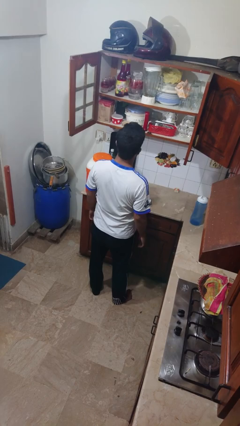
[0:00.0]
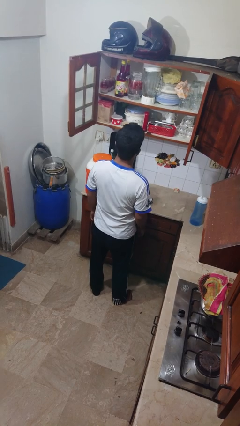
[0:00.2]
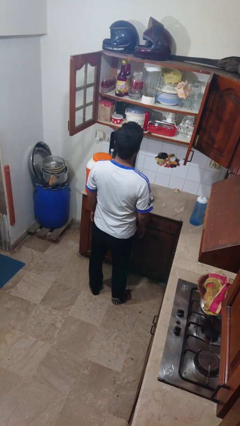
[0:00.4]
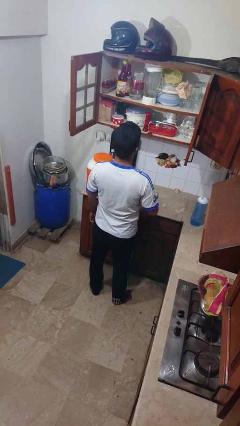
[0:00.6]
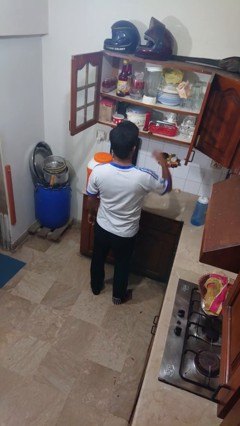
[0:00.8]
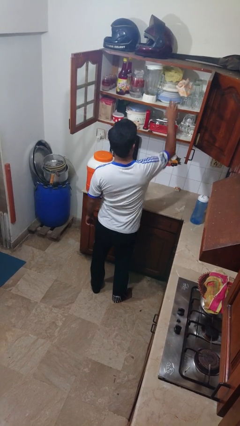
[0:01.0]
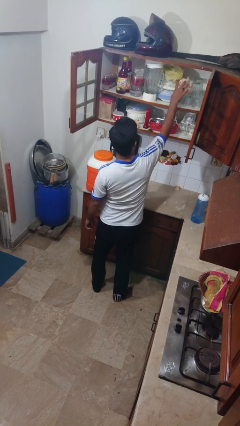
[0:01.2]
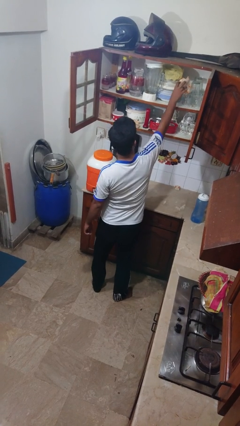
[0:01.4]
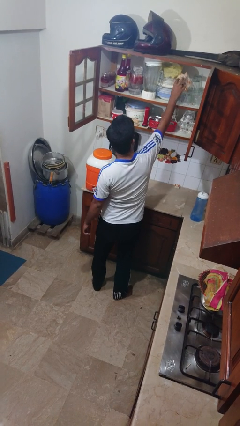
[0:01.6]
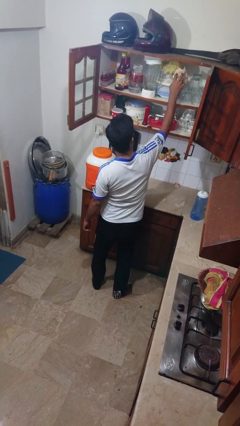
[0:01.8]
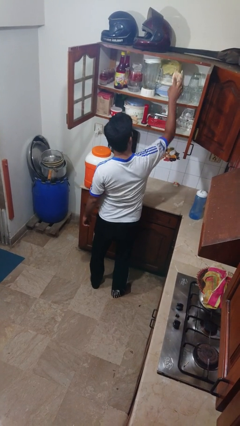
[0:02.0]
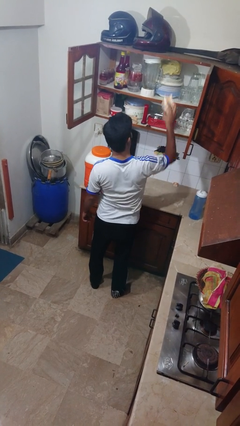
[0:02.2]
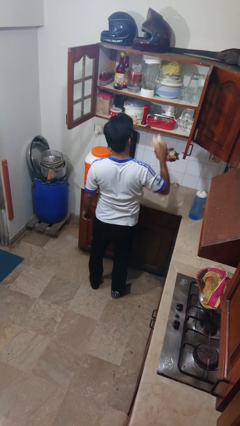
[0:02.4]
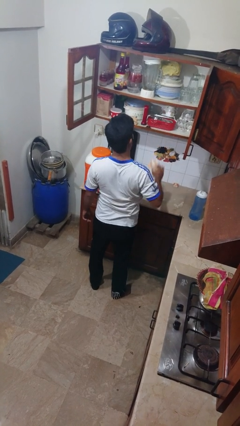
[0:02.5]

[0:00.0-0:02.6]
person picks up object from cabinet

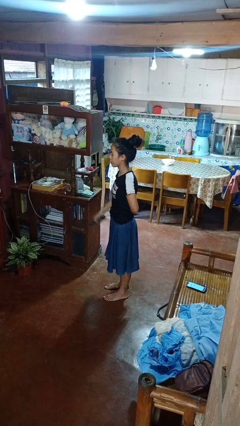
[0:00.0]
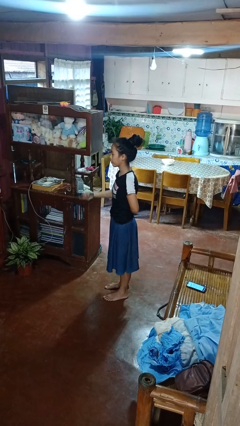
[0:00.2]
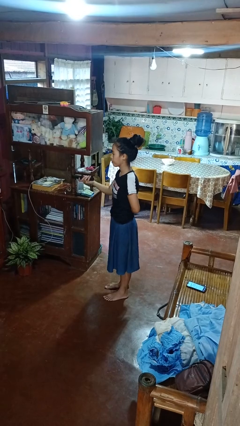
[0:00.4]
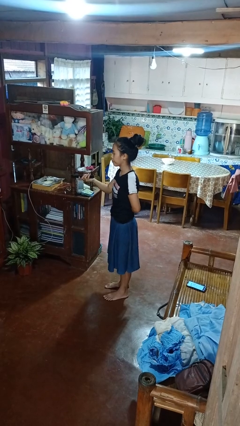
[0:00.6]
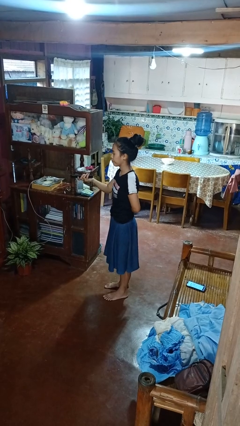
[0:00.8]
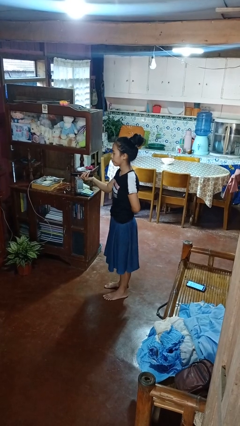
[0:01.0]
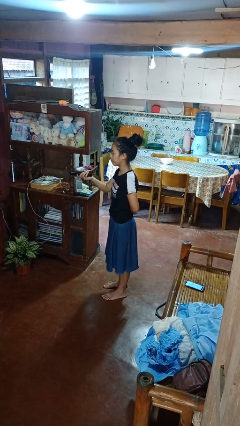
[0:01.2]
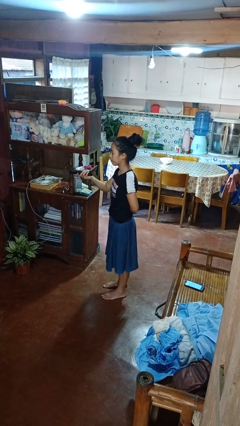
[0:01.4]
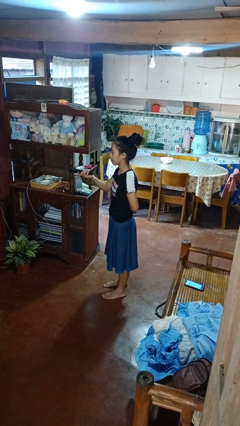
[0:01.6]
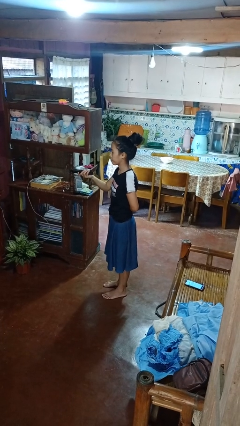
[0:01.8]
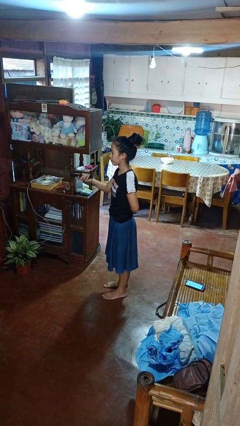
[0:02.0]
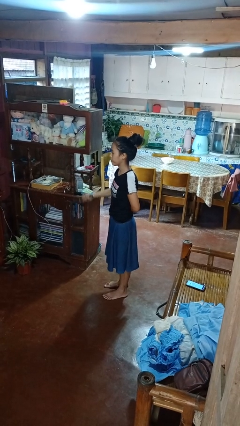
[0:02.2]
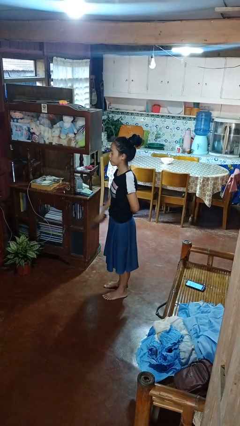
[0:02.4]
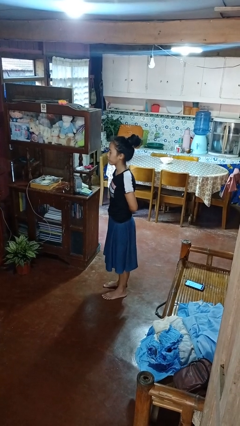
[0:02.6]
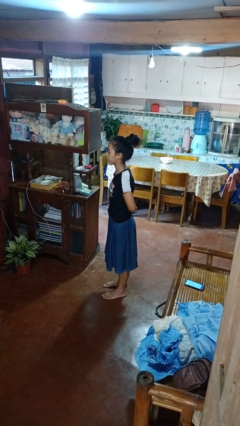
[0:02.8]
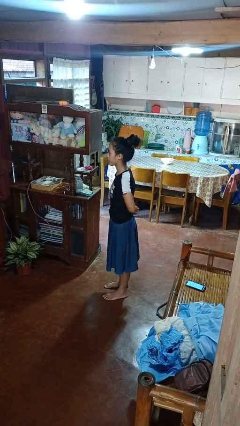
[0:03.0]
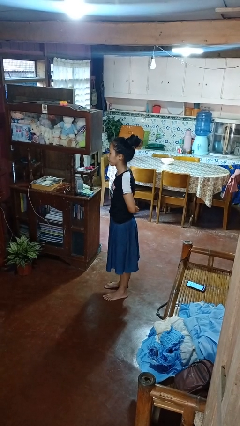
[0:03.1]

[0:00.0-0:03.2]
person uses television remote

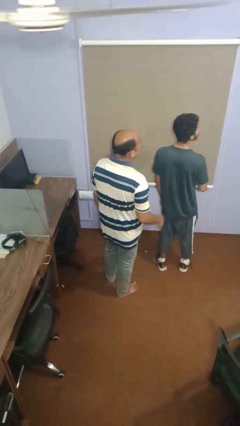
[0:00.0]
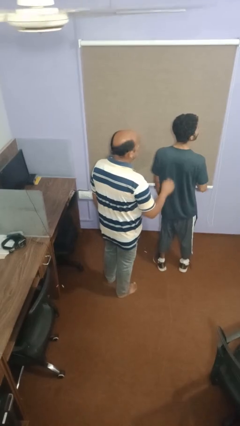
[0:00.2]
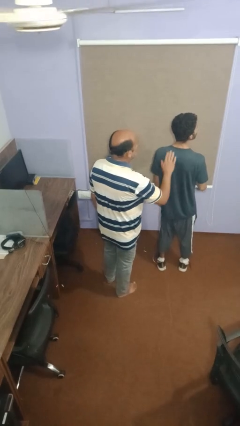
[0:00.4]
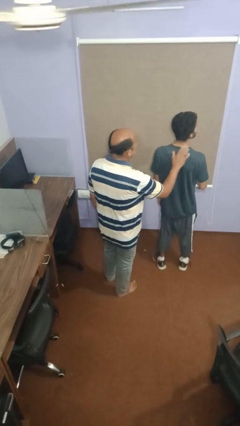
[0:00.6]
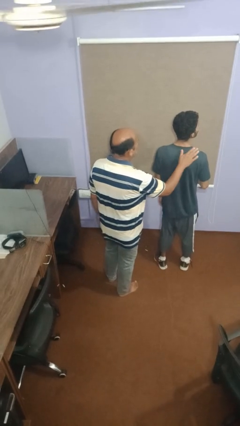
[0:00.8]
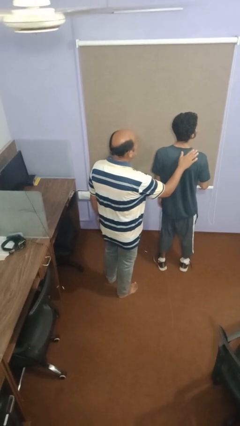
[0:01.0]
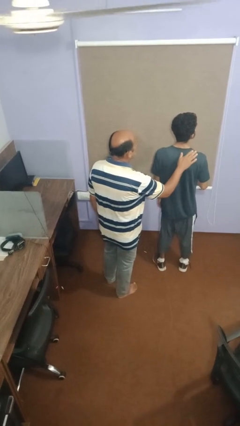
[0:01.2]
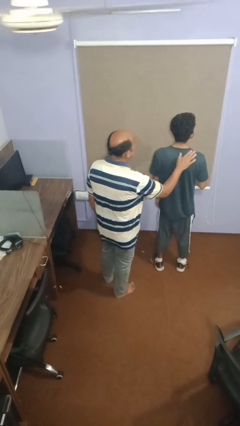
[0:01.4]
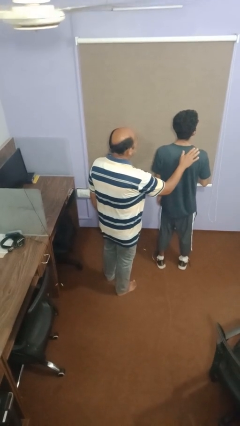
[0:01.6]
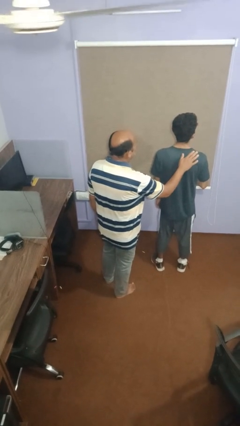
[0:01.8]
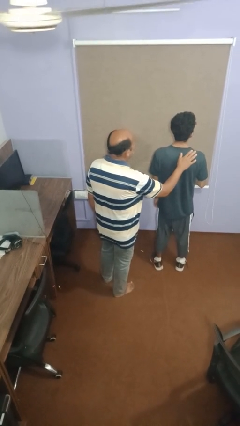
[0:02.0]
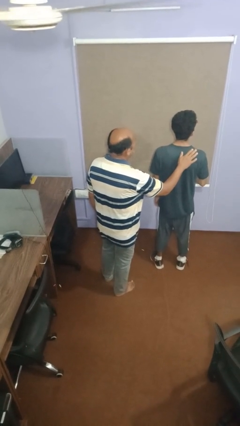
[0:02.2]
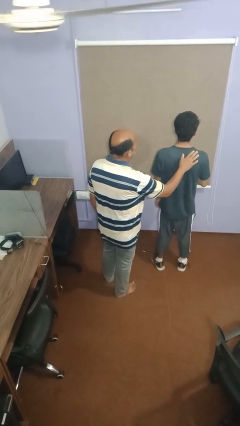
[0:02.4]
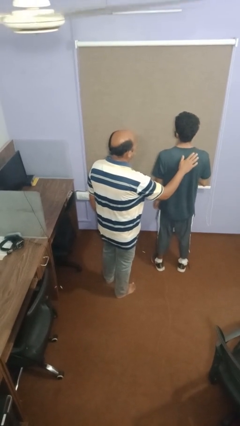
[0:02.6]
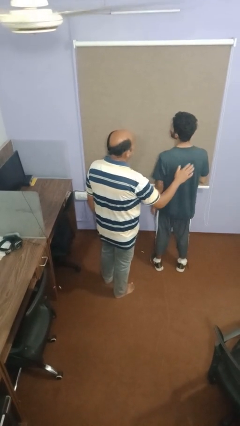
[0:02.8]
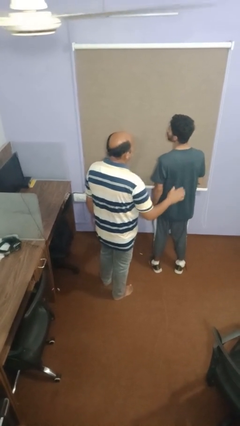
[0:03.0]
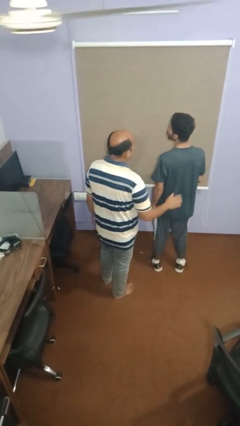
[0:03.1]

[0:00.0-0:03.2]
person touches back of person

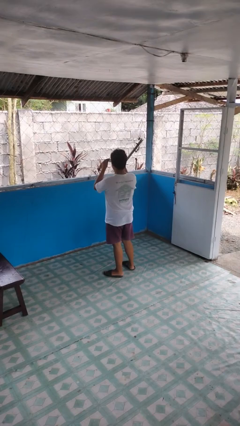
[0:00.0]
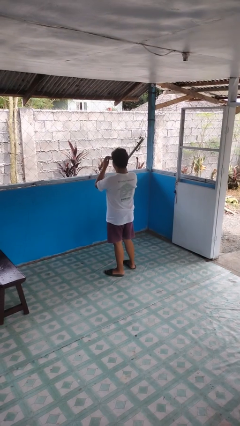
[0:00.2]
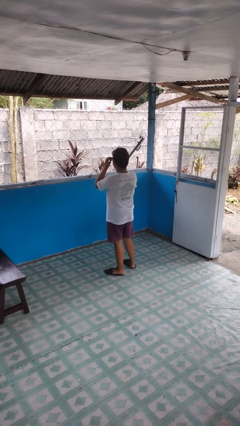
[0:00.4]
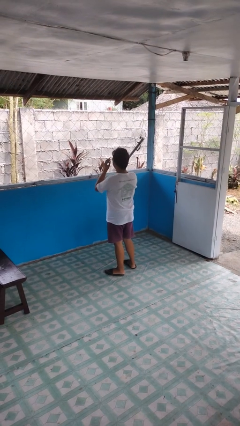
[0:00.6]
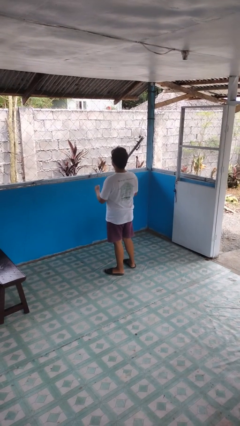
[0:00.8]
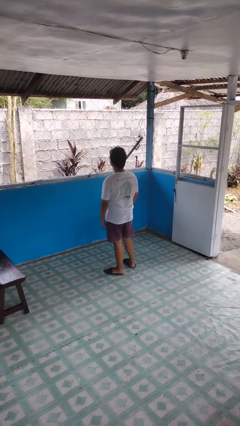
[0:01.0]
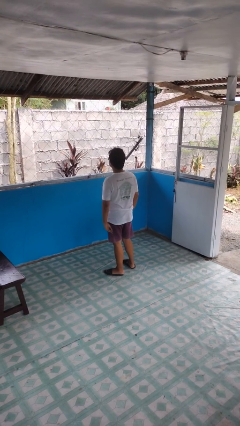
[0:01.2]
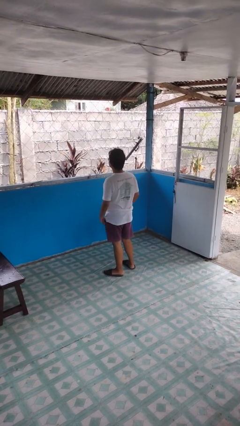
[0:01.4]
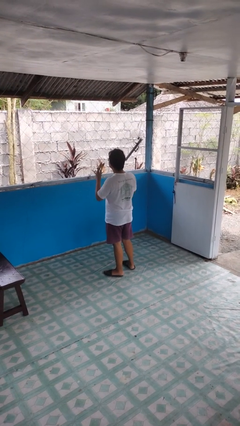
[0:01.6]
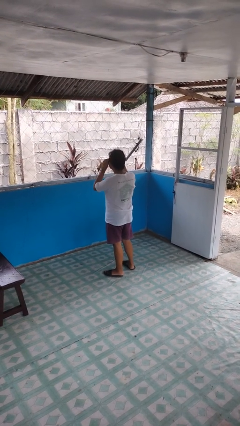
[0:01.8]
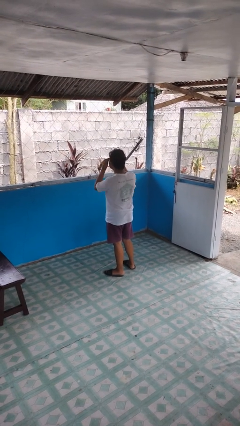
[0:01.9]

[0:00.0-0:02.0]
person puts on sunglasses

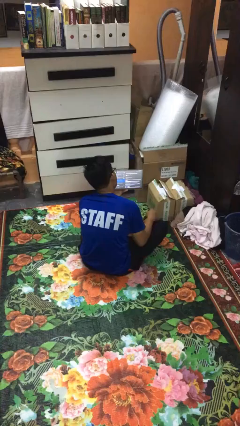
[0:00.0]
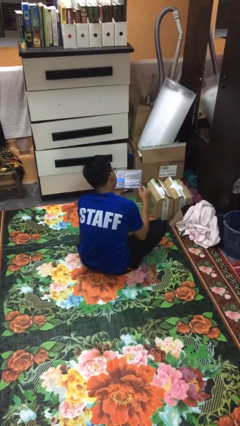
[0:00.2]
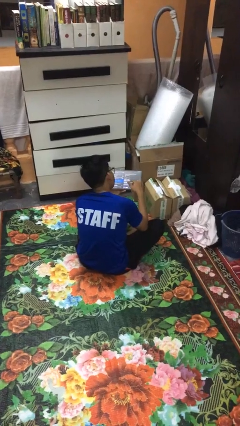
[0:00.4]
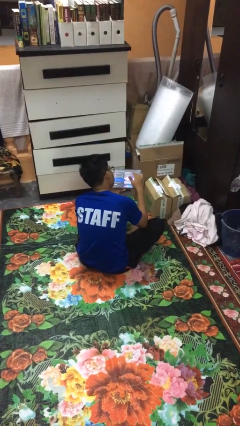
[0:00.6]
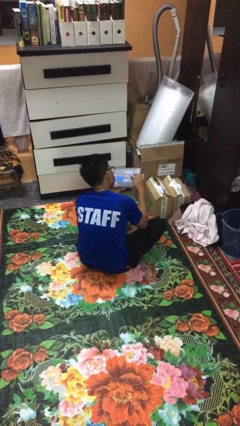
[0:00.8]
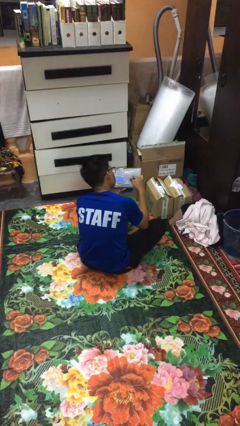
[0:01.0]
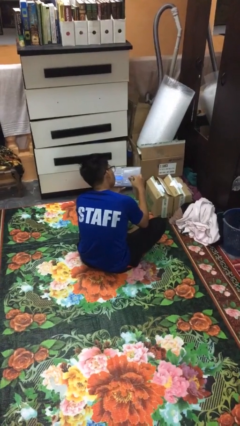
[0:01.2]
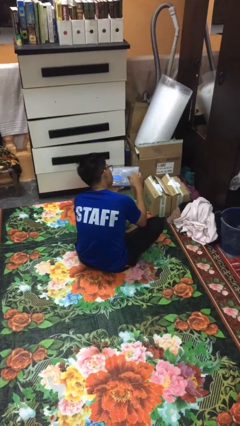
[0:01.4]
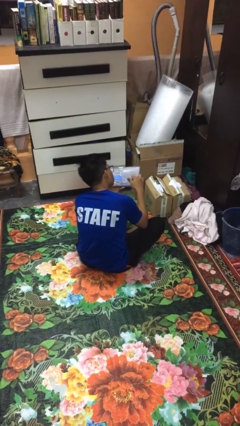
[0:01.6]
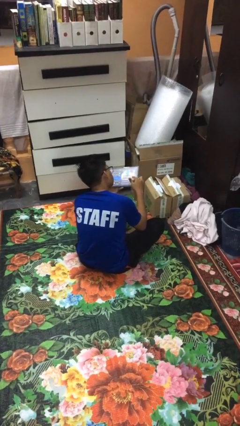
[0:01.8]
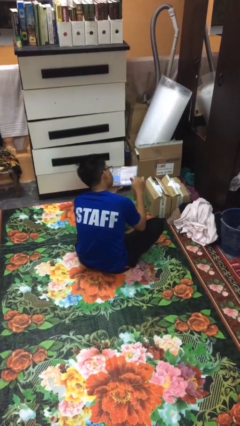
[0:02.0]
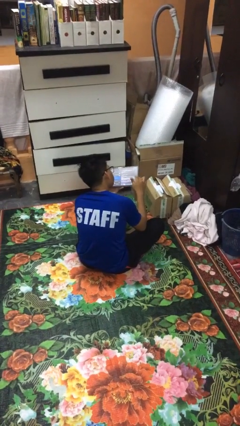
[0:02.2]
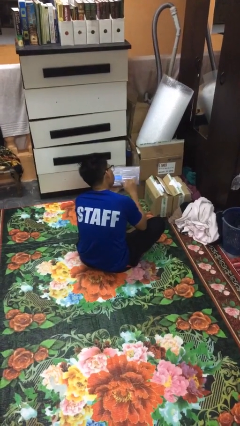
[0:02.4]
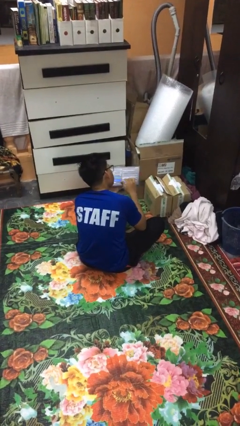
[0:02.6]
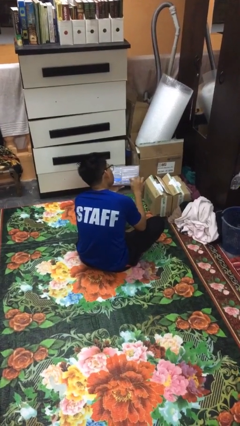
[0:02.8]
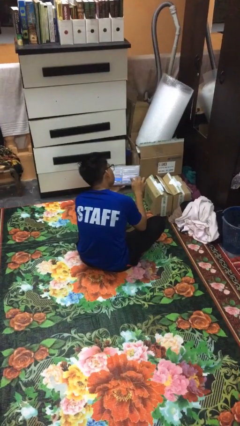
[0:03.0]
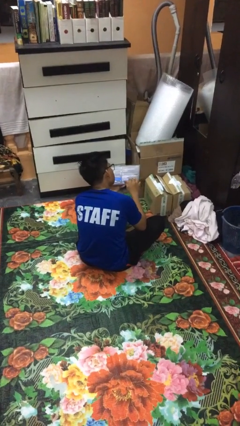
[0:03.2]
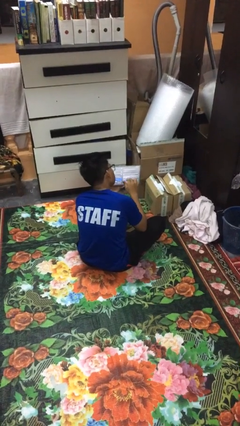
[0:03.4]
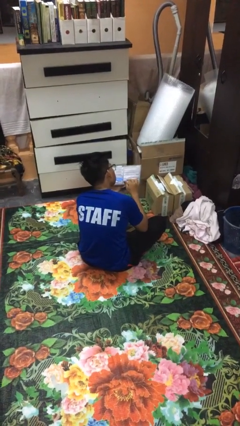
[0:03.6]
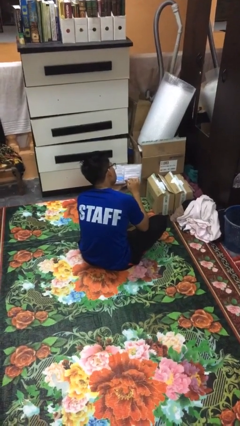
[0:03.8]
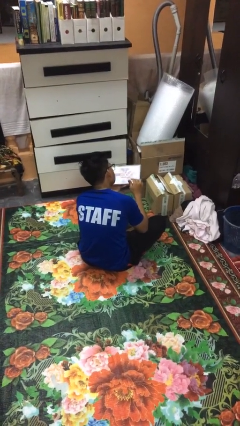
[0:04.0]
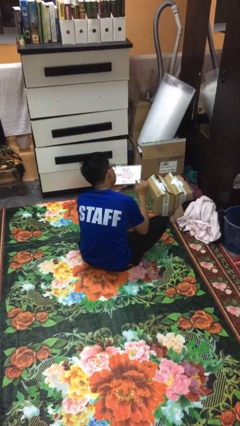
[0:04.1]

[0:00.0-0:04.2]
person interacts with tablet

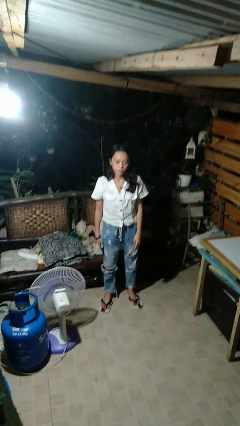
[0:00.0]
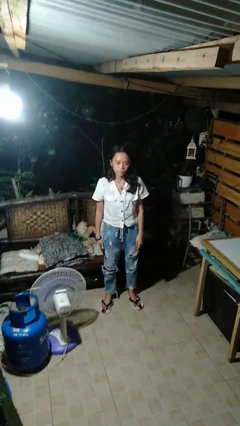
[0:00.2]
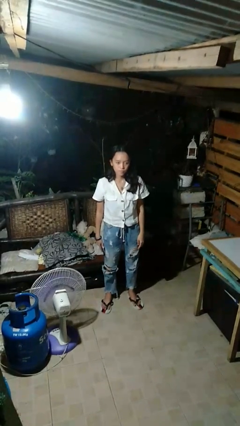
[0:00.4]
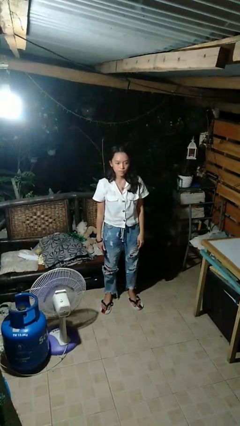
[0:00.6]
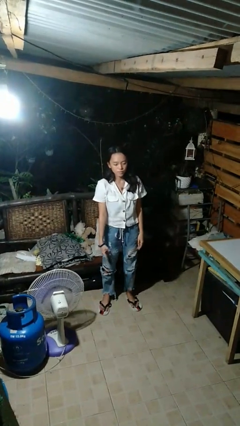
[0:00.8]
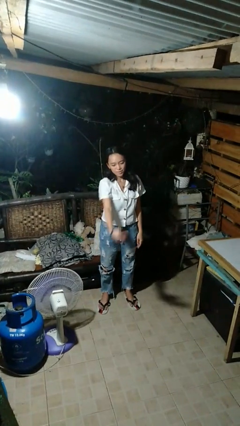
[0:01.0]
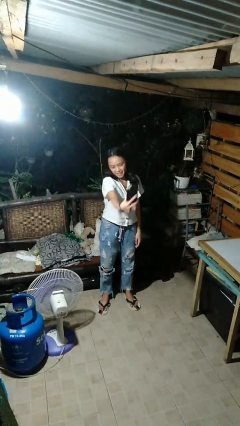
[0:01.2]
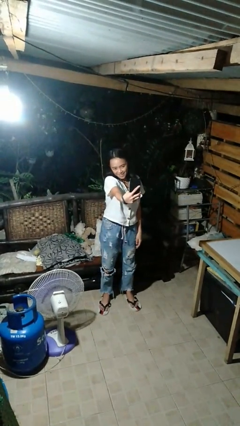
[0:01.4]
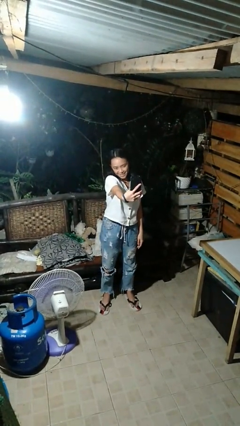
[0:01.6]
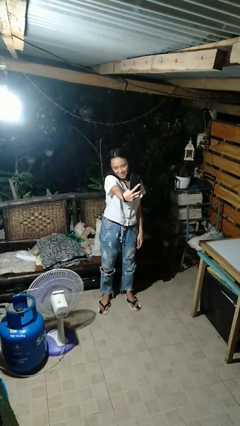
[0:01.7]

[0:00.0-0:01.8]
person takes selfie

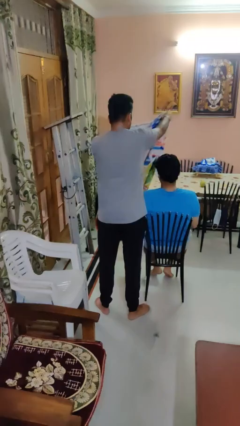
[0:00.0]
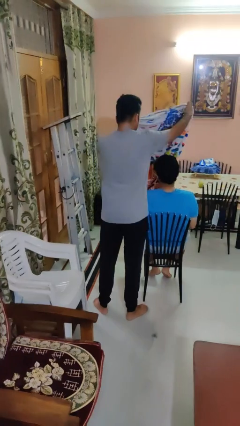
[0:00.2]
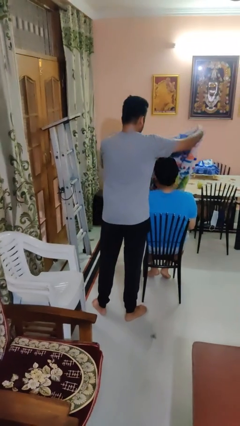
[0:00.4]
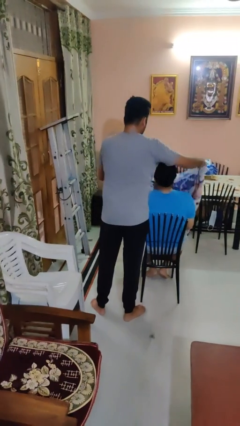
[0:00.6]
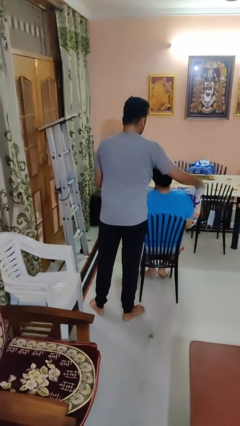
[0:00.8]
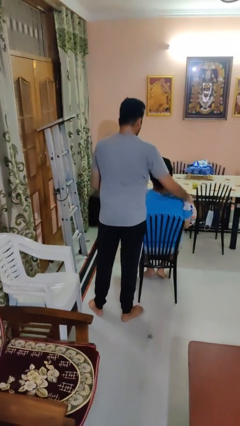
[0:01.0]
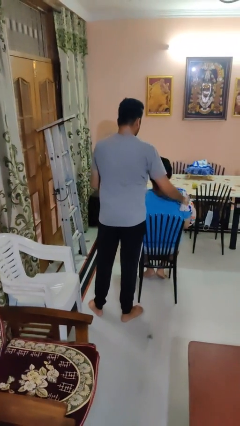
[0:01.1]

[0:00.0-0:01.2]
person covers friend with blanket
